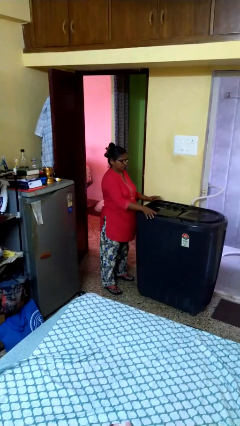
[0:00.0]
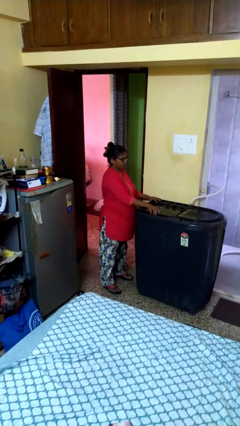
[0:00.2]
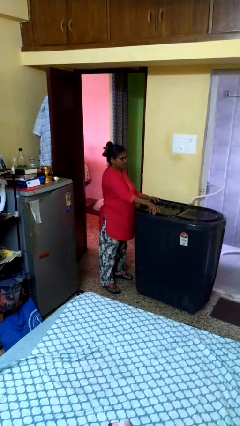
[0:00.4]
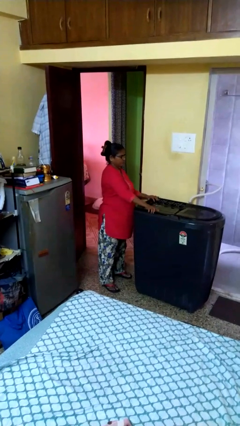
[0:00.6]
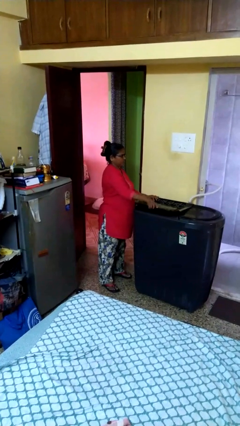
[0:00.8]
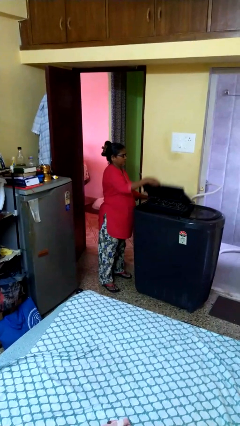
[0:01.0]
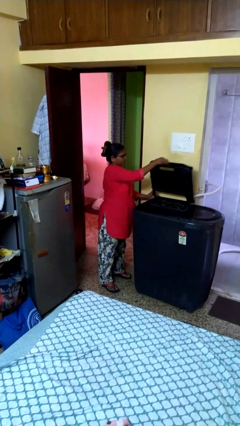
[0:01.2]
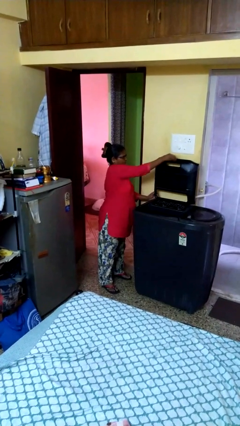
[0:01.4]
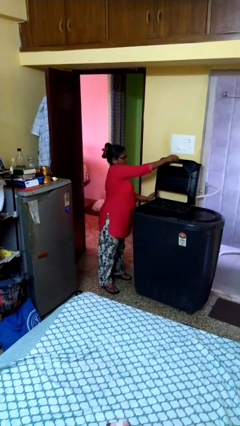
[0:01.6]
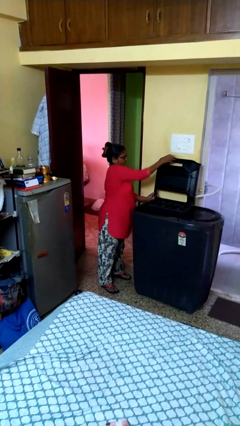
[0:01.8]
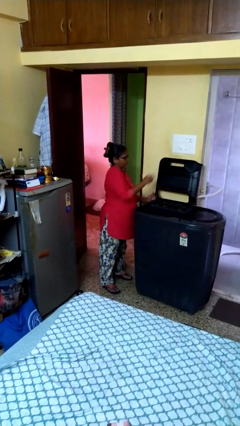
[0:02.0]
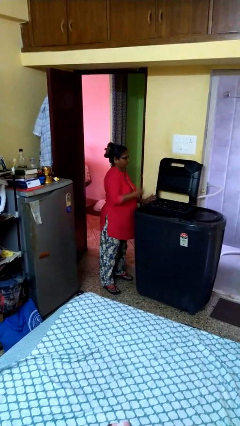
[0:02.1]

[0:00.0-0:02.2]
person opens clothes washer

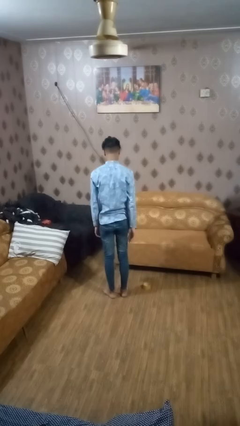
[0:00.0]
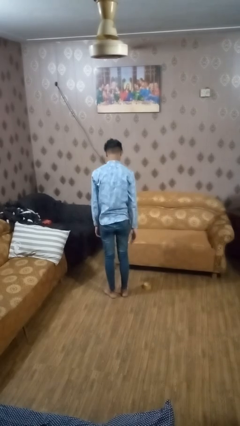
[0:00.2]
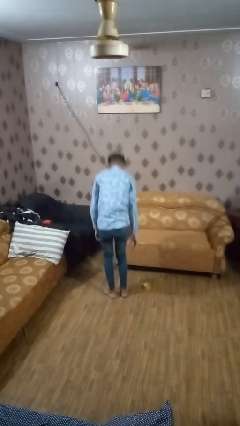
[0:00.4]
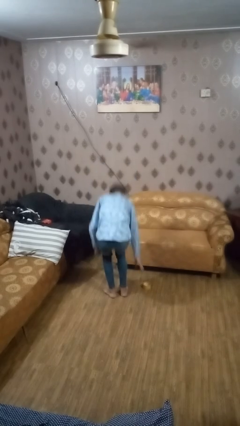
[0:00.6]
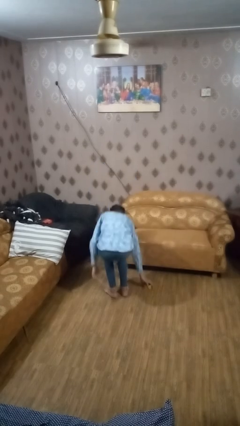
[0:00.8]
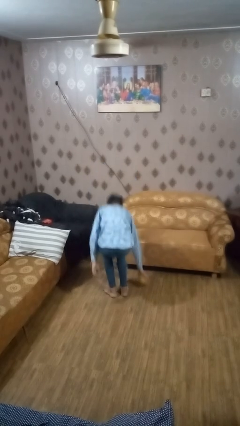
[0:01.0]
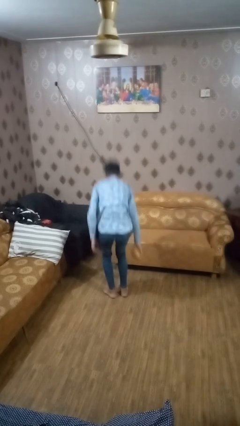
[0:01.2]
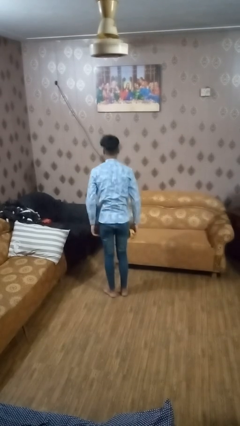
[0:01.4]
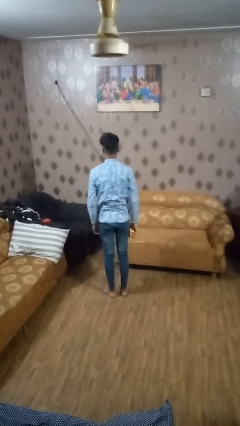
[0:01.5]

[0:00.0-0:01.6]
person picks up object from floor

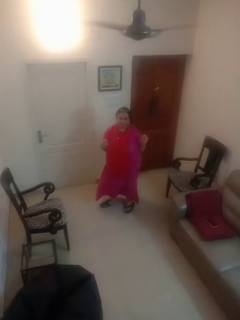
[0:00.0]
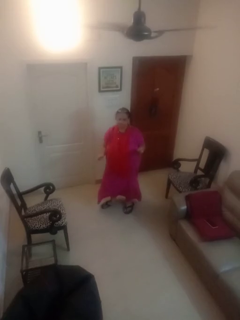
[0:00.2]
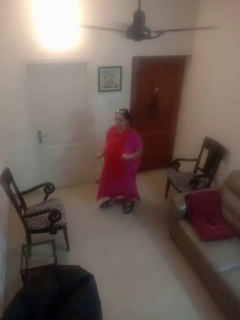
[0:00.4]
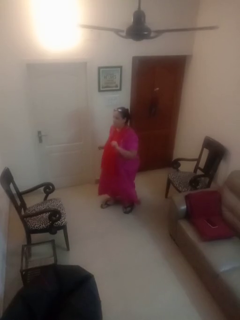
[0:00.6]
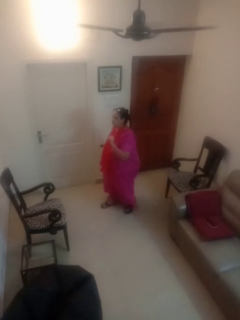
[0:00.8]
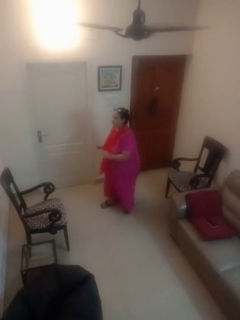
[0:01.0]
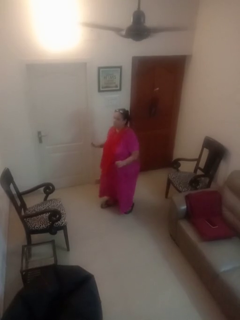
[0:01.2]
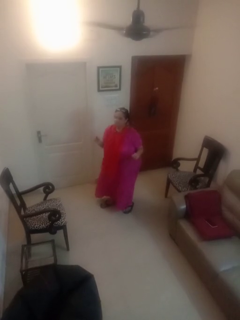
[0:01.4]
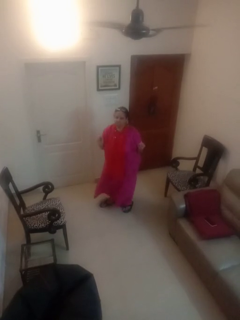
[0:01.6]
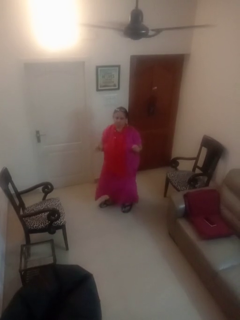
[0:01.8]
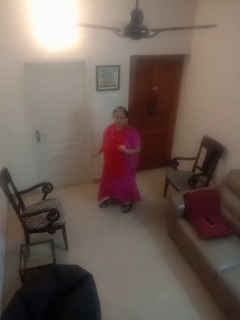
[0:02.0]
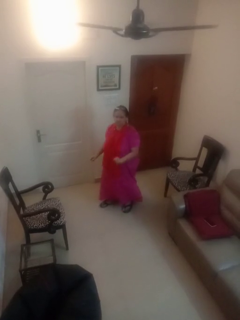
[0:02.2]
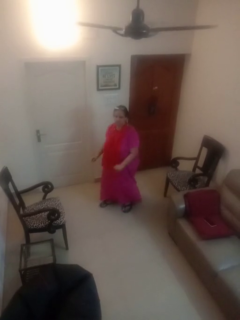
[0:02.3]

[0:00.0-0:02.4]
person dances in place

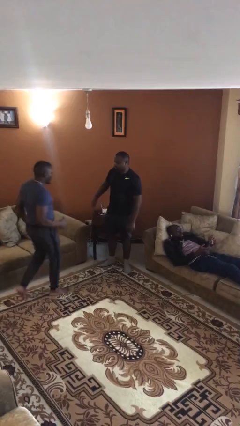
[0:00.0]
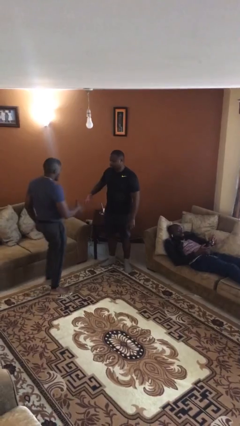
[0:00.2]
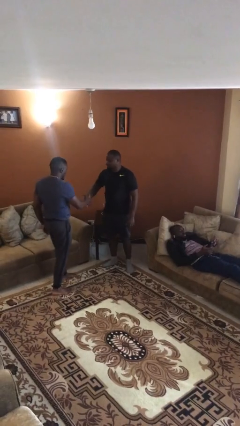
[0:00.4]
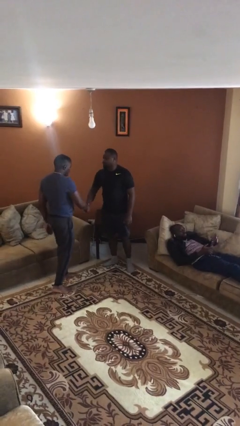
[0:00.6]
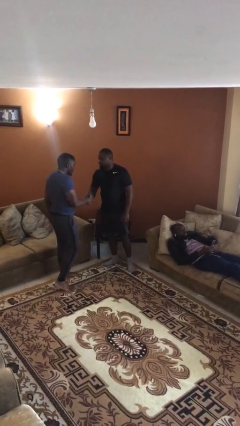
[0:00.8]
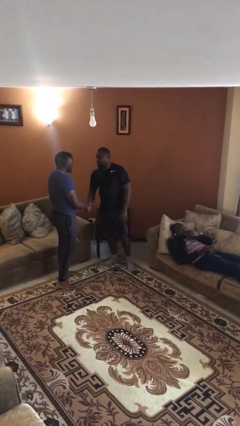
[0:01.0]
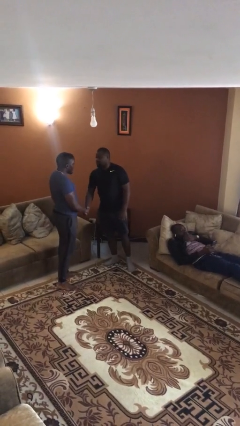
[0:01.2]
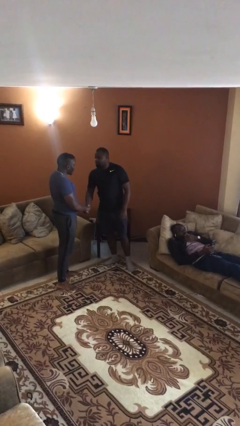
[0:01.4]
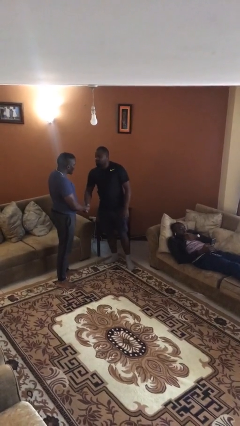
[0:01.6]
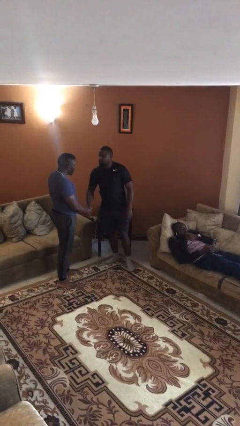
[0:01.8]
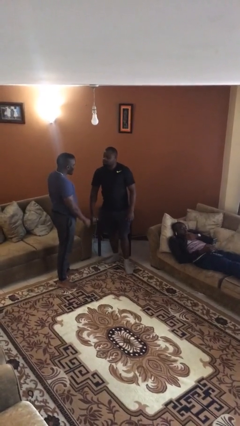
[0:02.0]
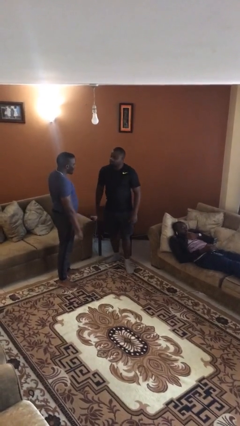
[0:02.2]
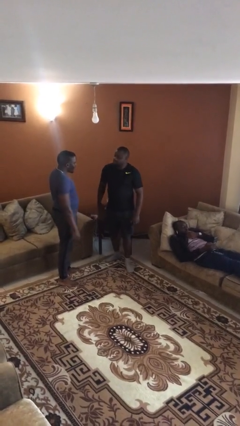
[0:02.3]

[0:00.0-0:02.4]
person shakes hand

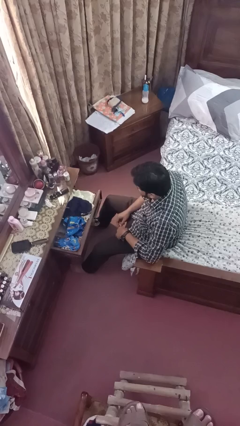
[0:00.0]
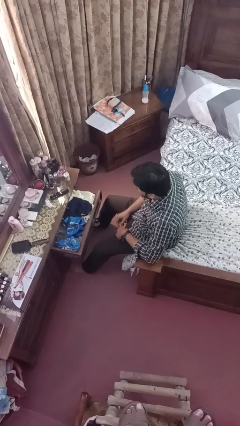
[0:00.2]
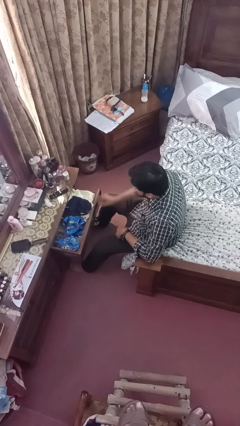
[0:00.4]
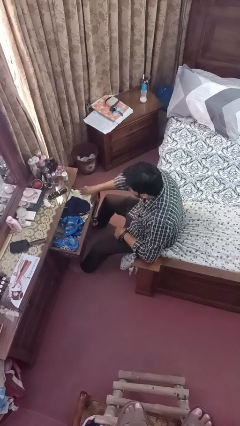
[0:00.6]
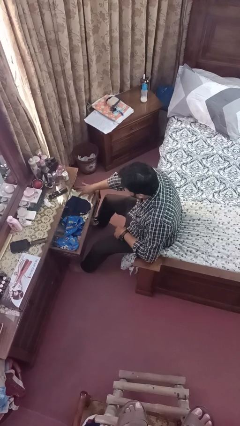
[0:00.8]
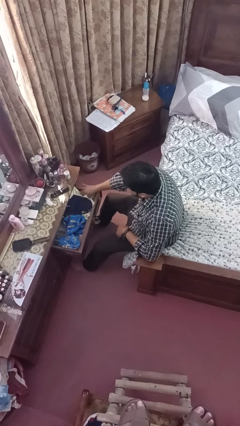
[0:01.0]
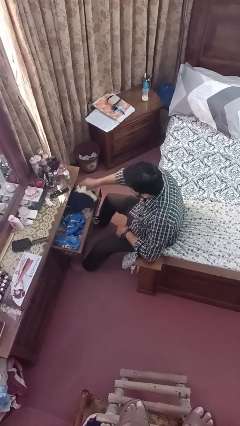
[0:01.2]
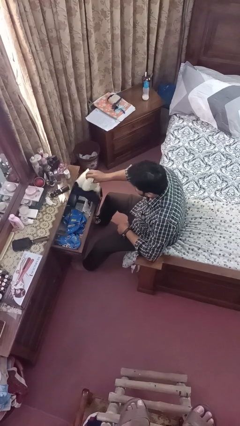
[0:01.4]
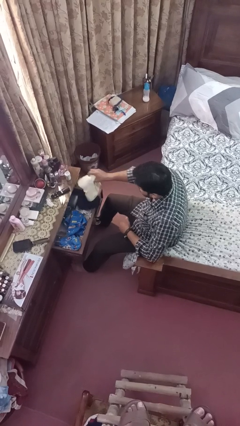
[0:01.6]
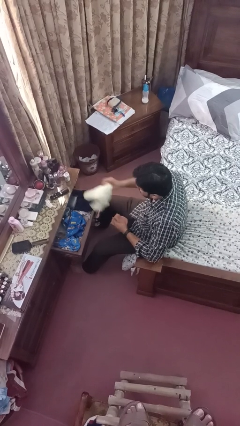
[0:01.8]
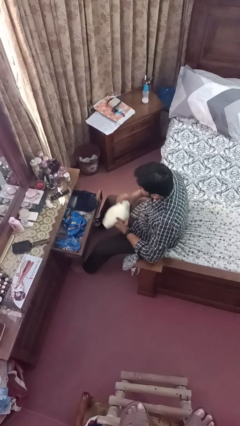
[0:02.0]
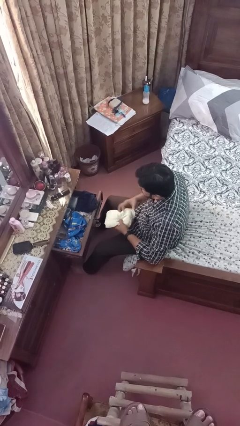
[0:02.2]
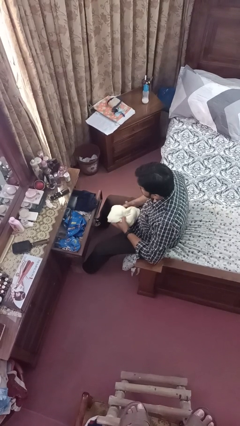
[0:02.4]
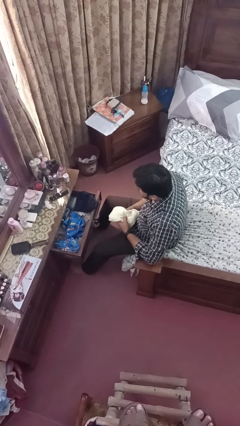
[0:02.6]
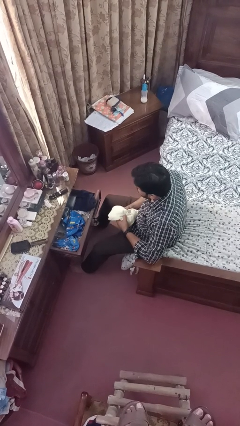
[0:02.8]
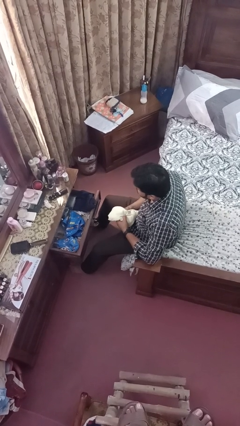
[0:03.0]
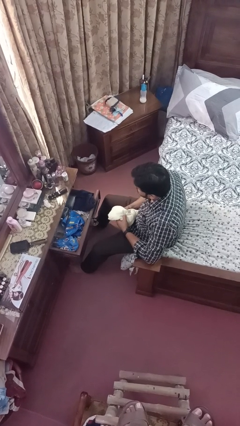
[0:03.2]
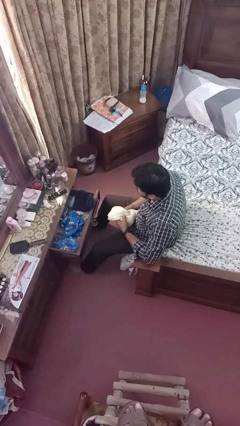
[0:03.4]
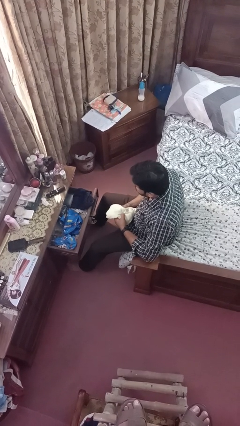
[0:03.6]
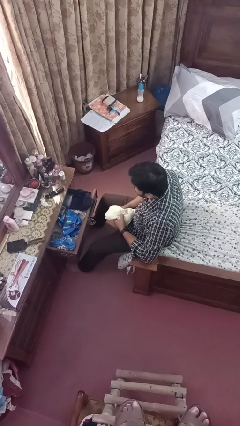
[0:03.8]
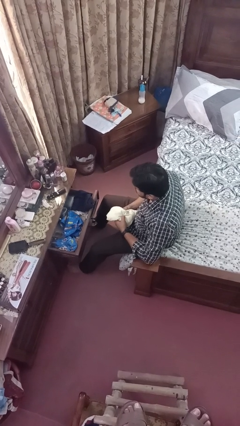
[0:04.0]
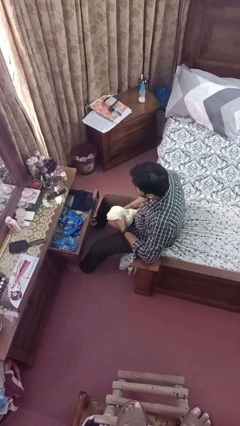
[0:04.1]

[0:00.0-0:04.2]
person takes clothes from dresser

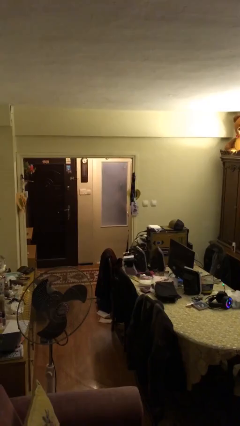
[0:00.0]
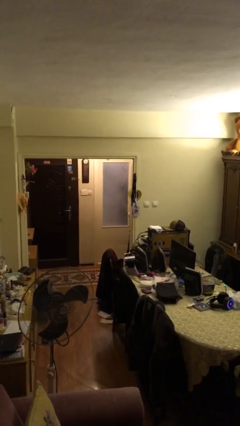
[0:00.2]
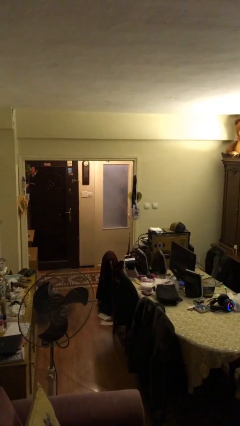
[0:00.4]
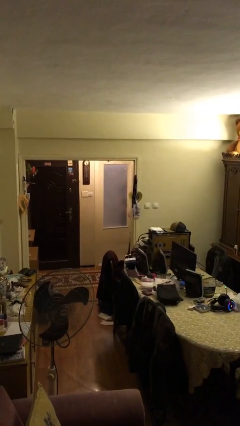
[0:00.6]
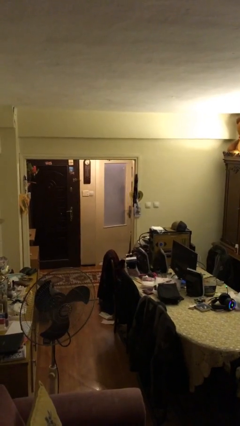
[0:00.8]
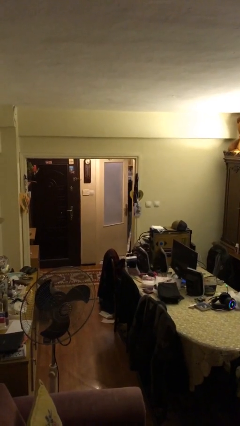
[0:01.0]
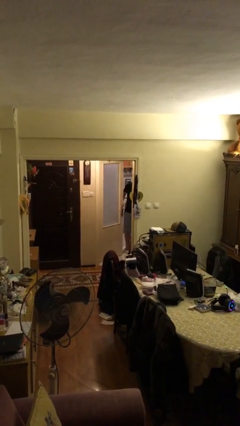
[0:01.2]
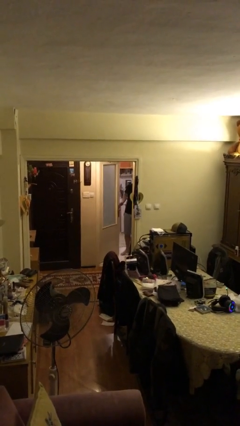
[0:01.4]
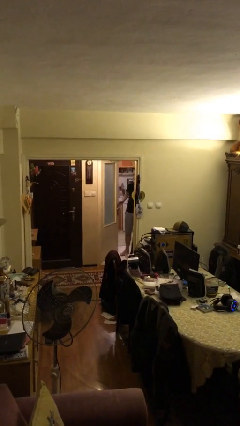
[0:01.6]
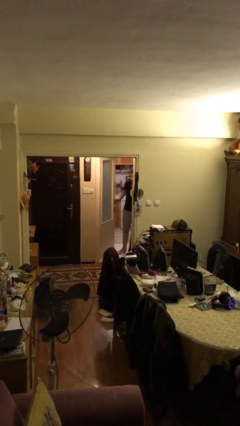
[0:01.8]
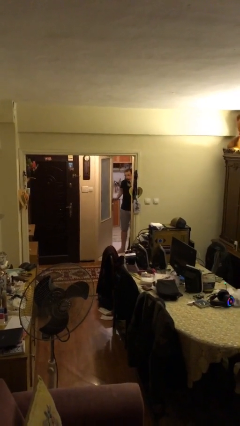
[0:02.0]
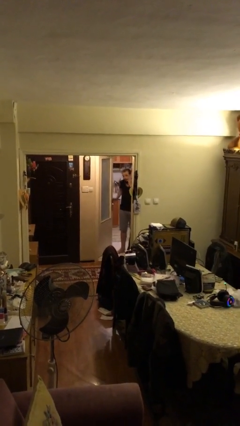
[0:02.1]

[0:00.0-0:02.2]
person opens facility door

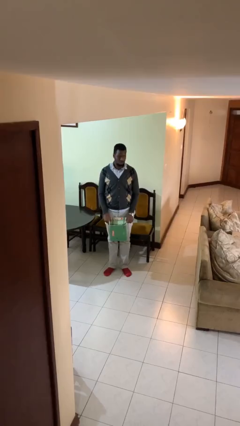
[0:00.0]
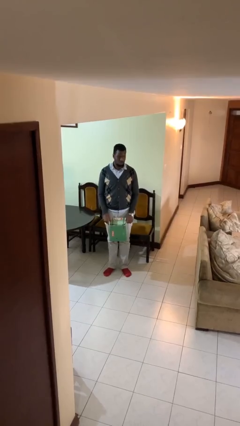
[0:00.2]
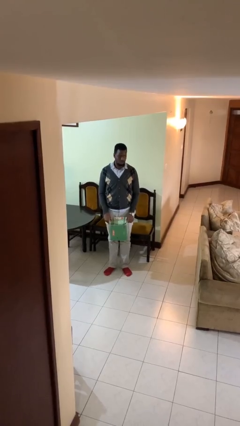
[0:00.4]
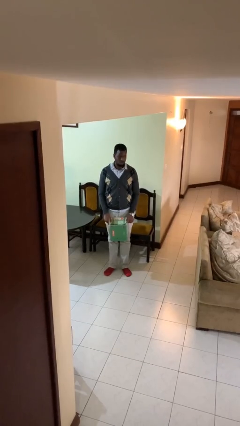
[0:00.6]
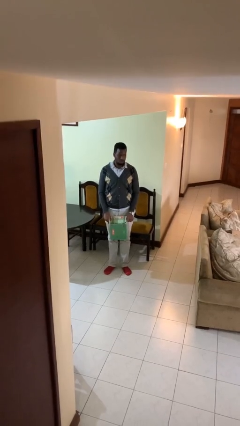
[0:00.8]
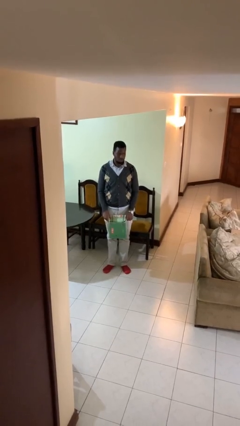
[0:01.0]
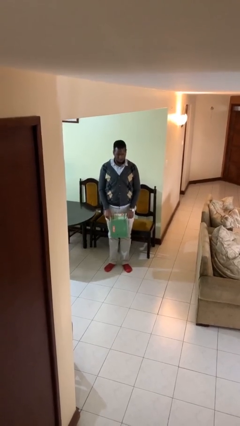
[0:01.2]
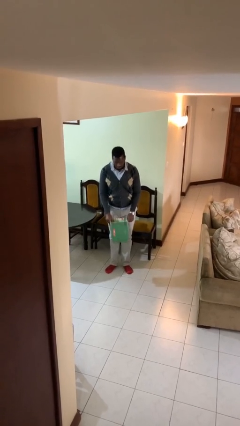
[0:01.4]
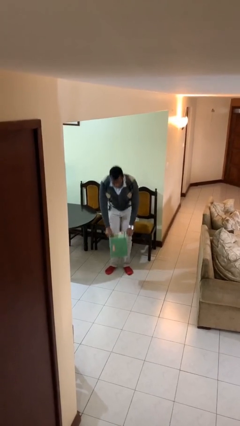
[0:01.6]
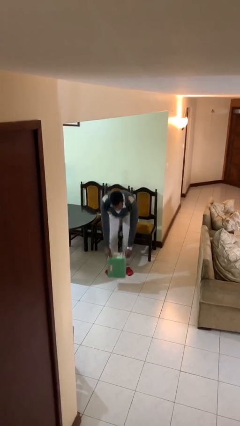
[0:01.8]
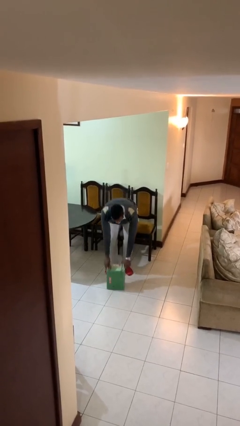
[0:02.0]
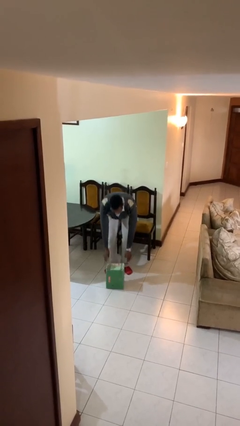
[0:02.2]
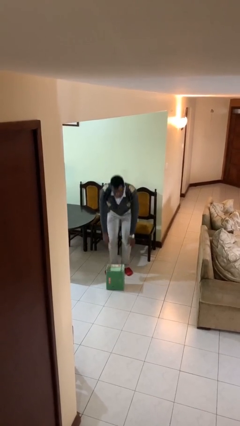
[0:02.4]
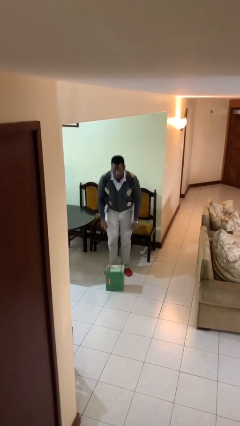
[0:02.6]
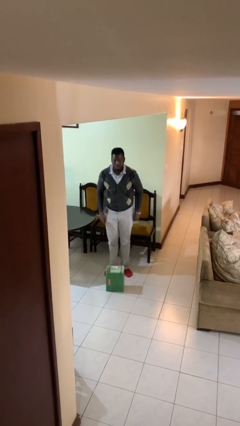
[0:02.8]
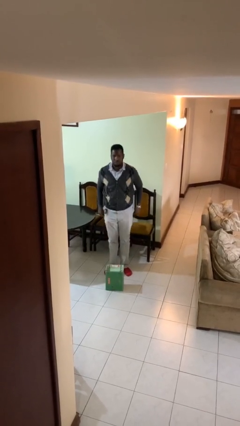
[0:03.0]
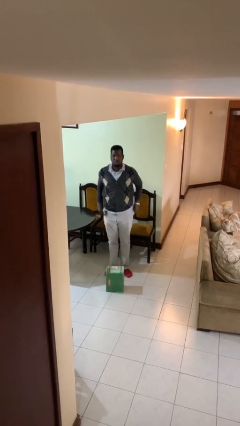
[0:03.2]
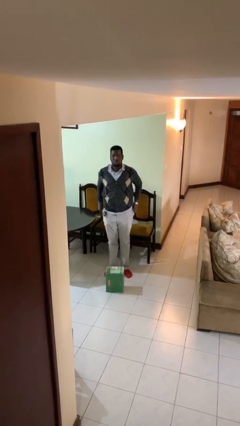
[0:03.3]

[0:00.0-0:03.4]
person puts down object on floor
